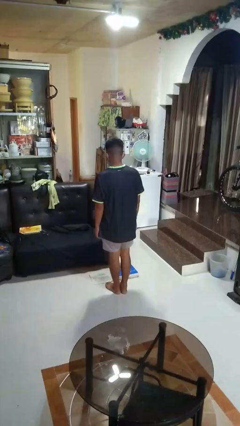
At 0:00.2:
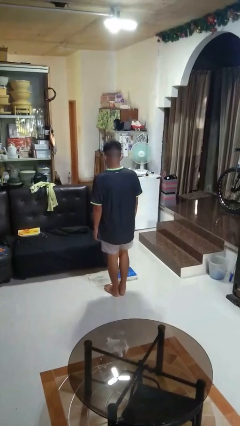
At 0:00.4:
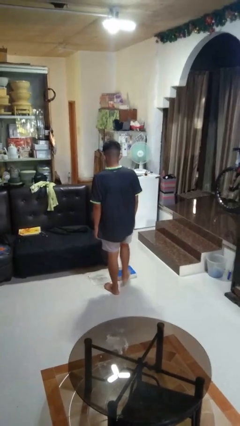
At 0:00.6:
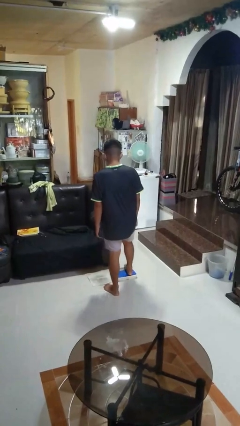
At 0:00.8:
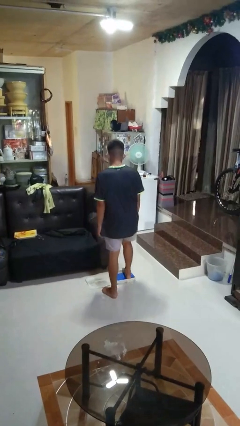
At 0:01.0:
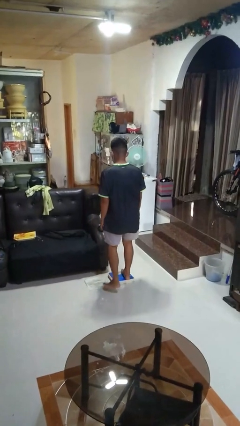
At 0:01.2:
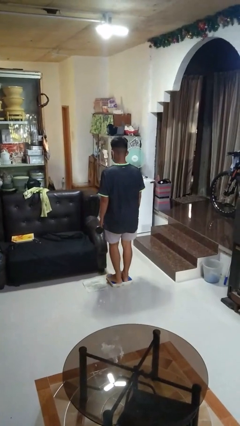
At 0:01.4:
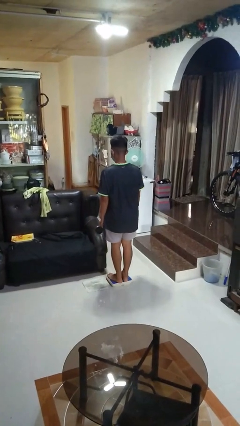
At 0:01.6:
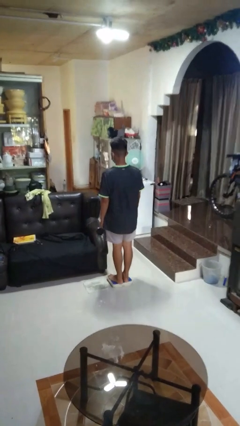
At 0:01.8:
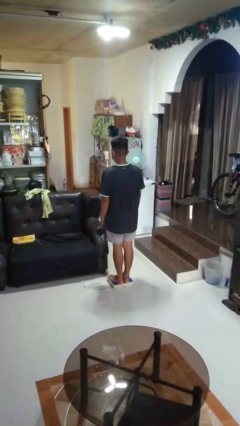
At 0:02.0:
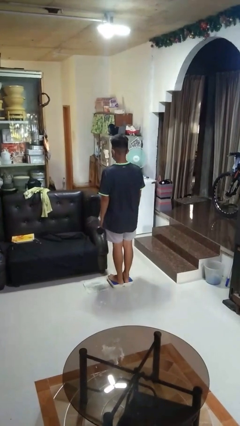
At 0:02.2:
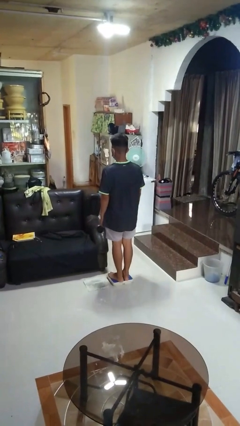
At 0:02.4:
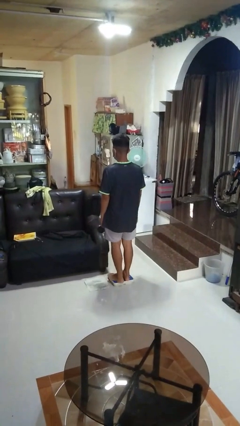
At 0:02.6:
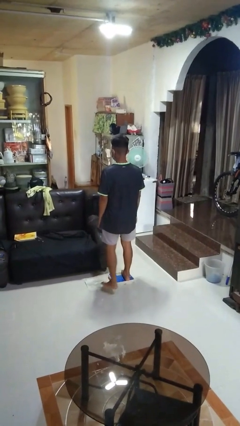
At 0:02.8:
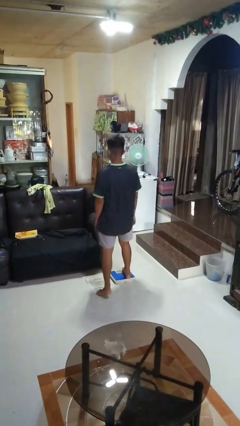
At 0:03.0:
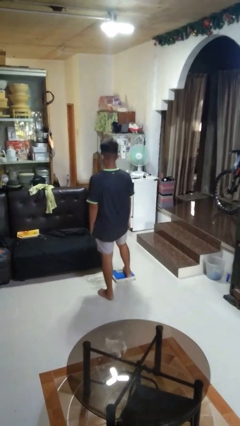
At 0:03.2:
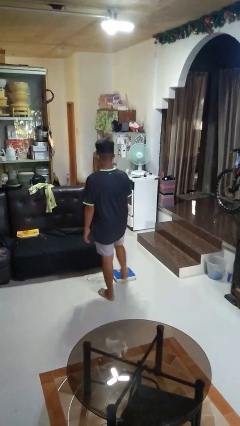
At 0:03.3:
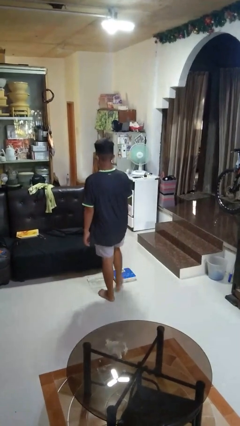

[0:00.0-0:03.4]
person uses bodyweight scale

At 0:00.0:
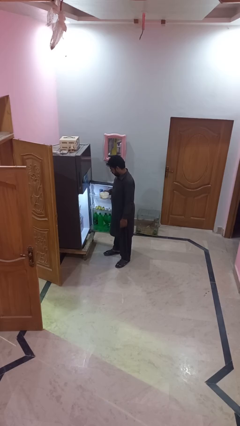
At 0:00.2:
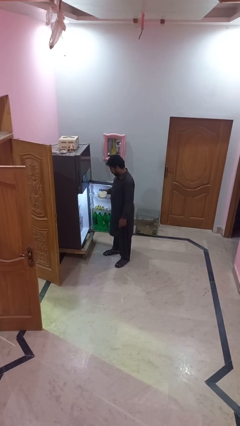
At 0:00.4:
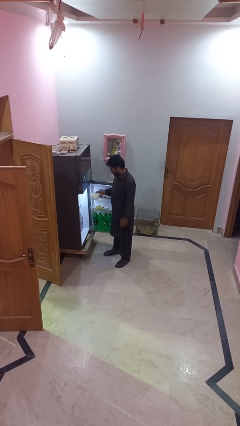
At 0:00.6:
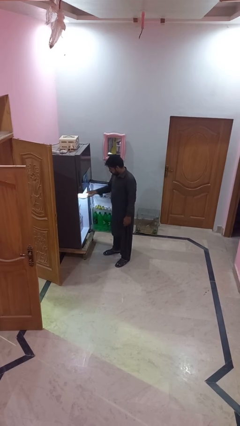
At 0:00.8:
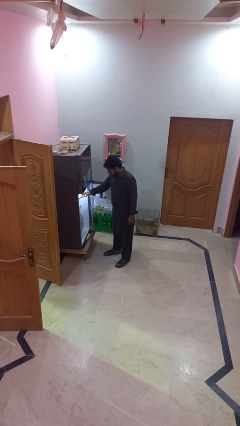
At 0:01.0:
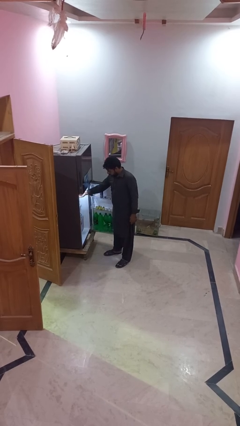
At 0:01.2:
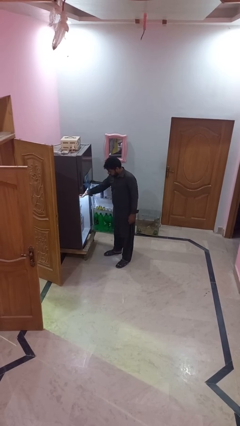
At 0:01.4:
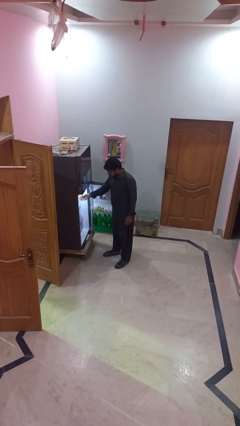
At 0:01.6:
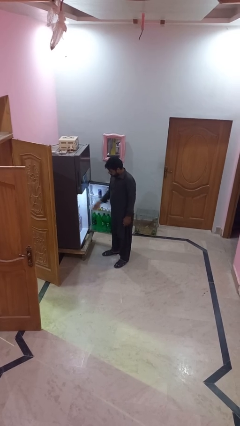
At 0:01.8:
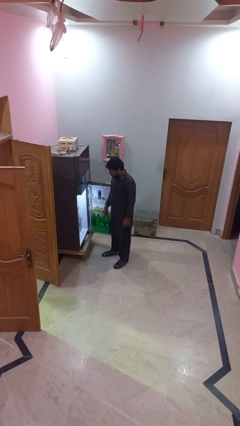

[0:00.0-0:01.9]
person puts object into refrigerator

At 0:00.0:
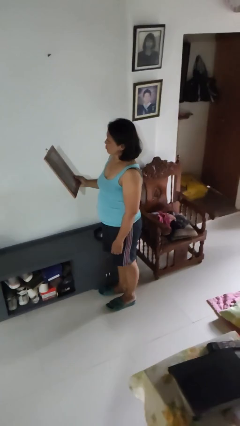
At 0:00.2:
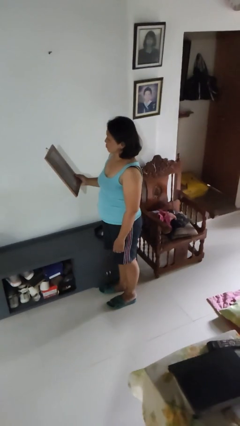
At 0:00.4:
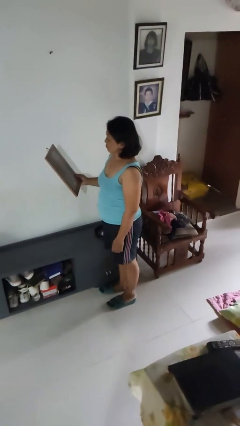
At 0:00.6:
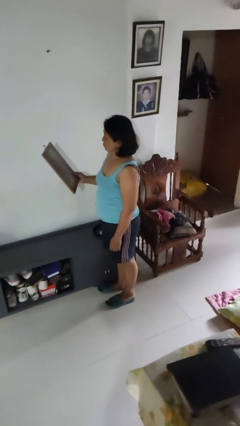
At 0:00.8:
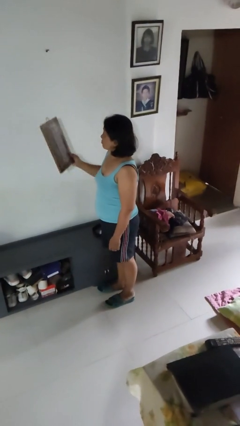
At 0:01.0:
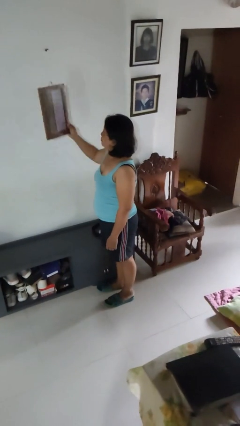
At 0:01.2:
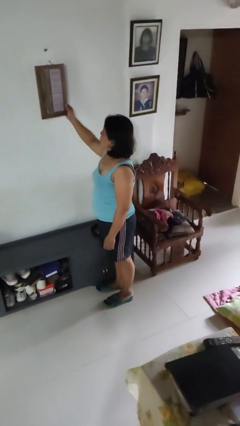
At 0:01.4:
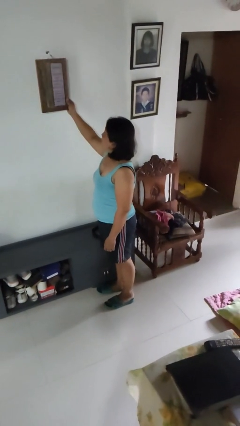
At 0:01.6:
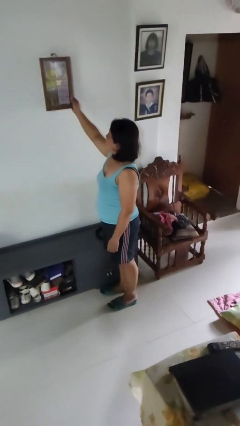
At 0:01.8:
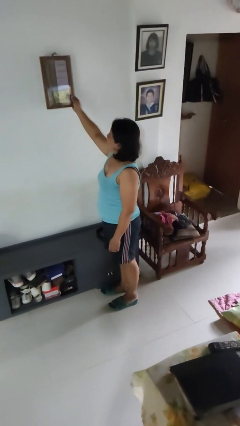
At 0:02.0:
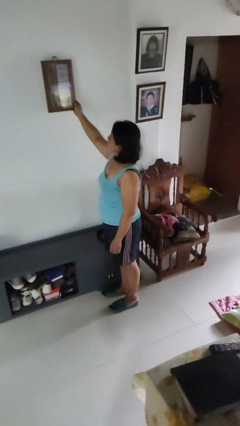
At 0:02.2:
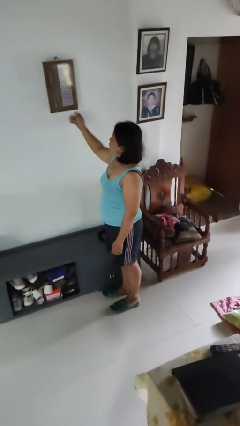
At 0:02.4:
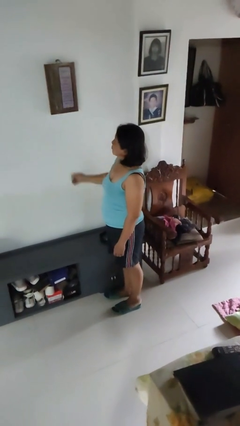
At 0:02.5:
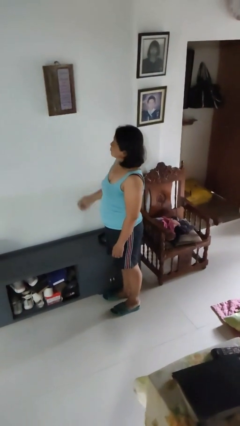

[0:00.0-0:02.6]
person puts up picture frame

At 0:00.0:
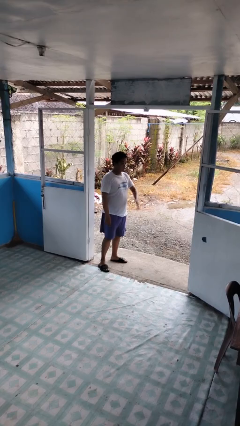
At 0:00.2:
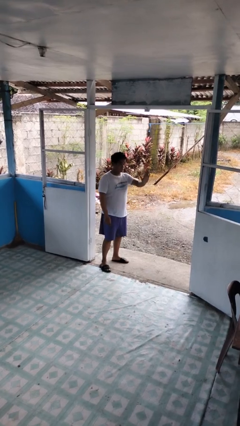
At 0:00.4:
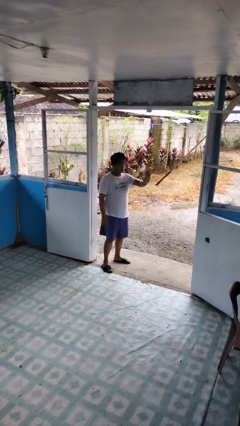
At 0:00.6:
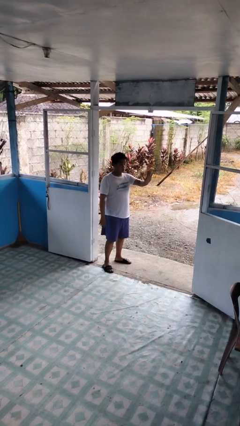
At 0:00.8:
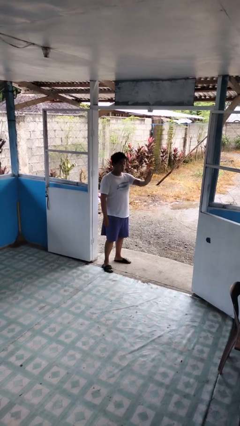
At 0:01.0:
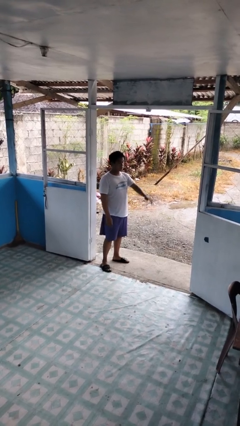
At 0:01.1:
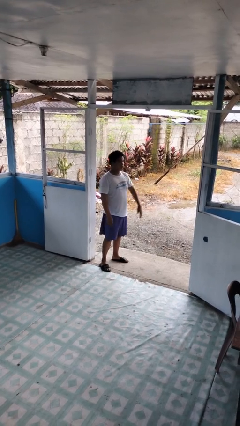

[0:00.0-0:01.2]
person gestures stop

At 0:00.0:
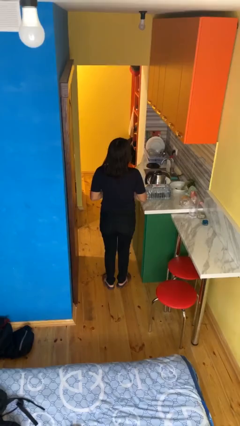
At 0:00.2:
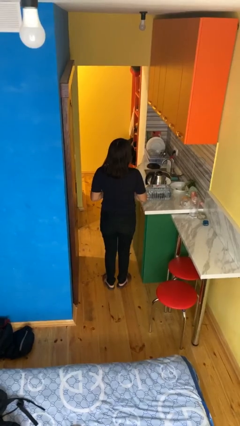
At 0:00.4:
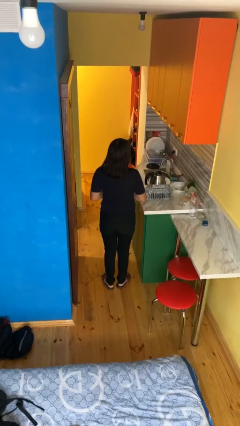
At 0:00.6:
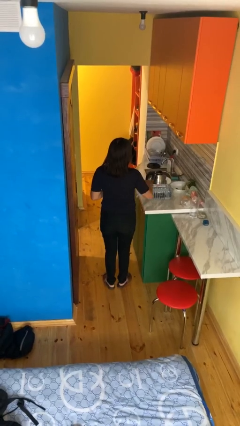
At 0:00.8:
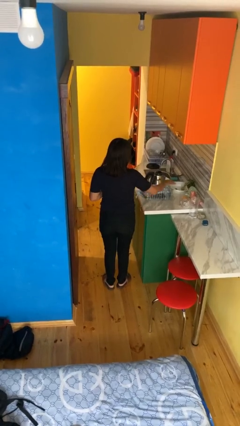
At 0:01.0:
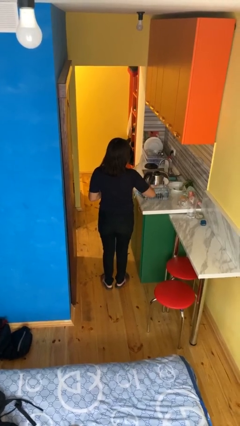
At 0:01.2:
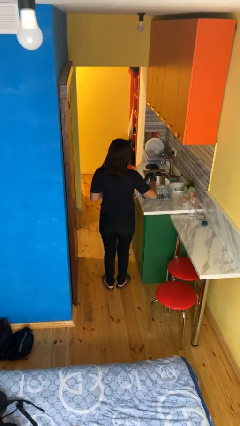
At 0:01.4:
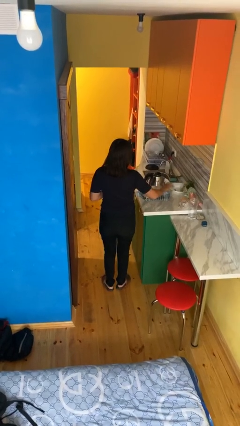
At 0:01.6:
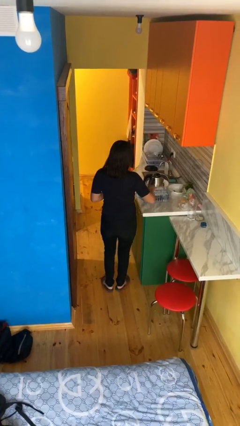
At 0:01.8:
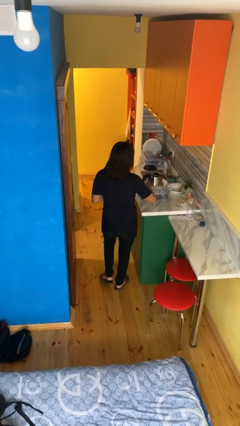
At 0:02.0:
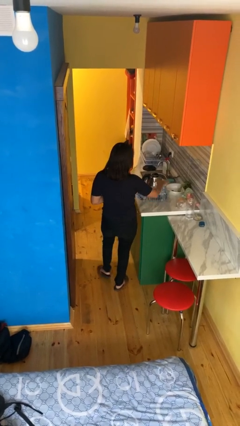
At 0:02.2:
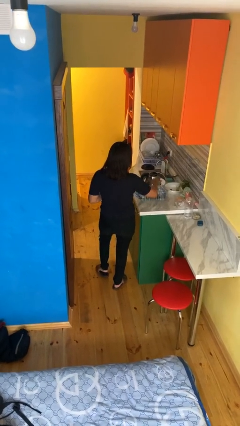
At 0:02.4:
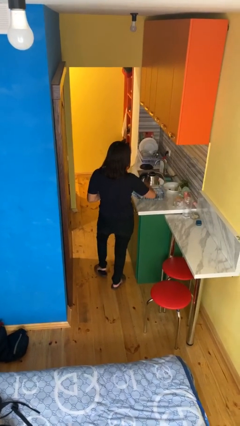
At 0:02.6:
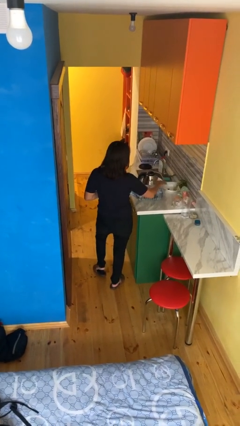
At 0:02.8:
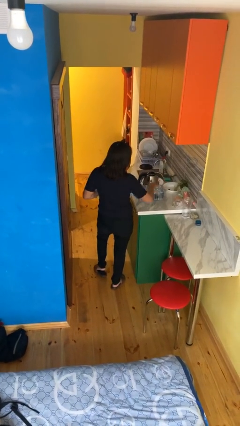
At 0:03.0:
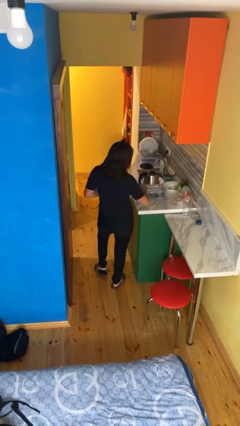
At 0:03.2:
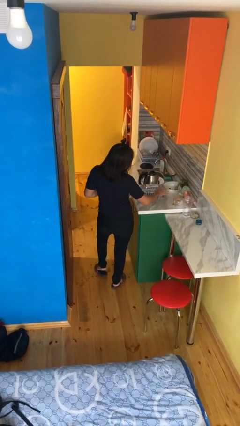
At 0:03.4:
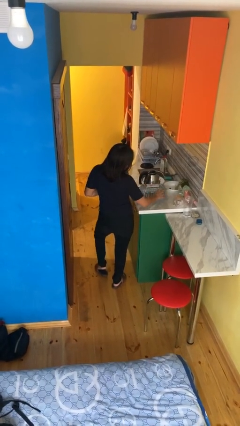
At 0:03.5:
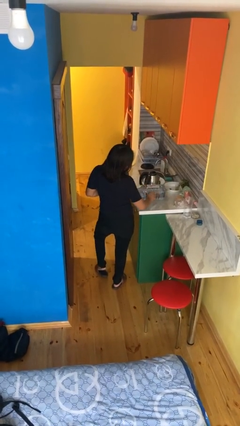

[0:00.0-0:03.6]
person waves hand over object

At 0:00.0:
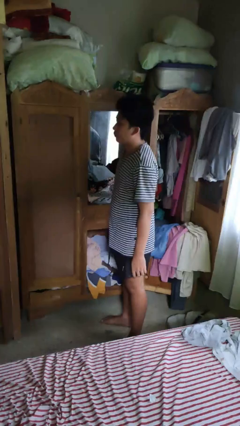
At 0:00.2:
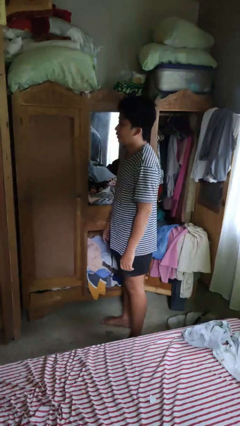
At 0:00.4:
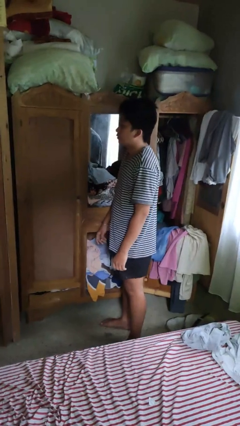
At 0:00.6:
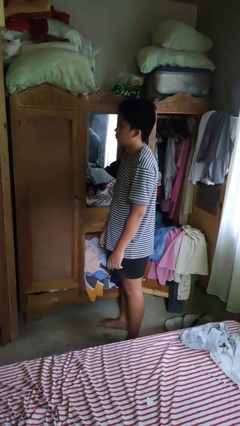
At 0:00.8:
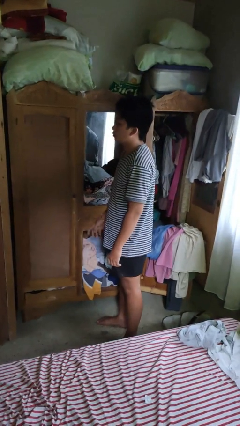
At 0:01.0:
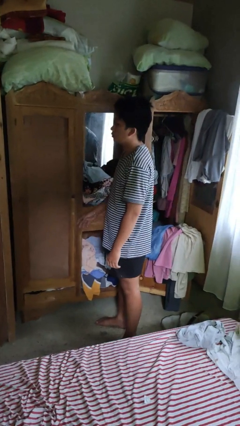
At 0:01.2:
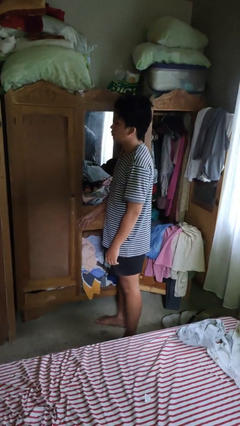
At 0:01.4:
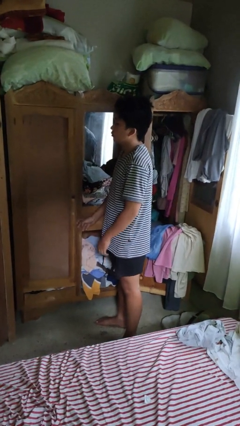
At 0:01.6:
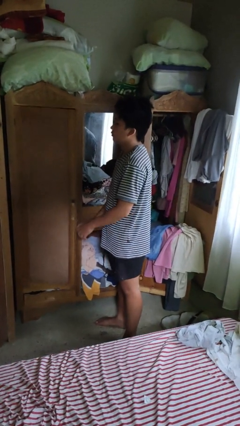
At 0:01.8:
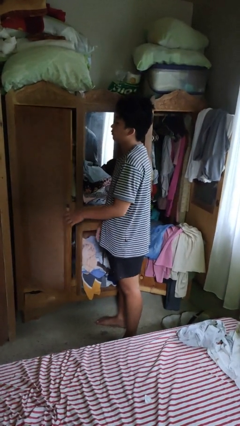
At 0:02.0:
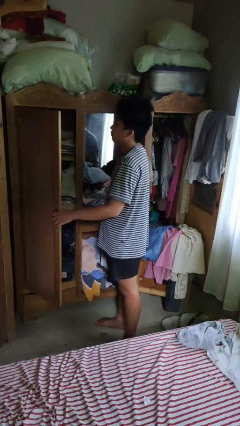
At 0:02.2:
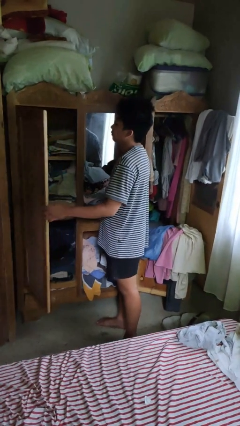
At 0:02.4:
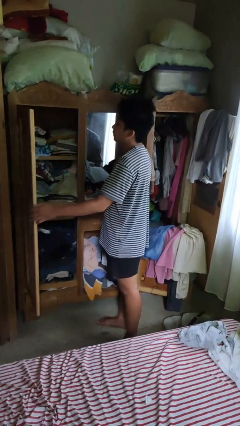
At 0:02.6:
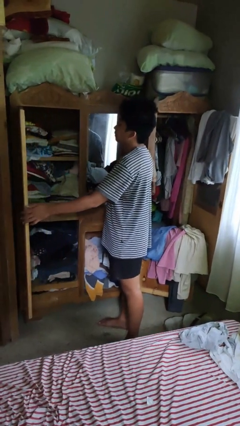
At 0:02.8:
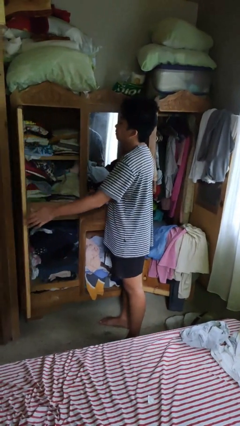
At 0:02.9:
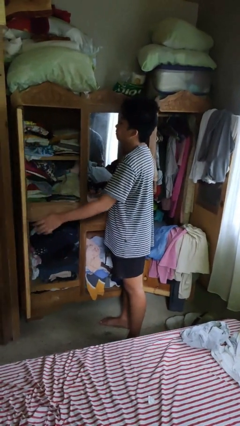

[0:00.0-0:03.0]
person opens dresser drawer

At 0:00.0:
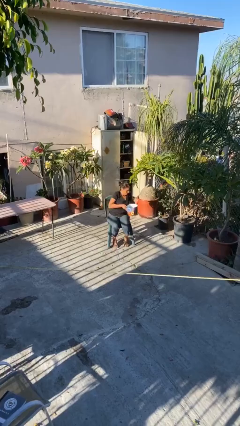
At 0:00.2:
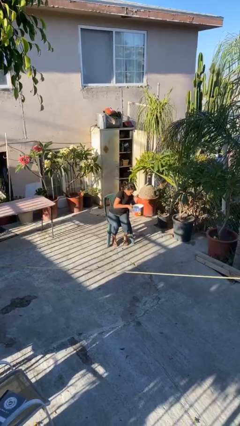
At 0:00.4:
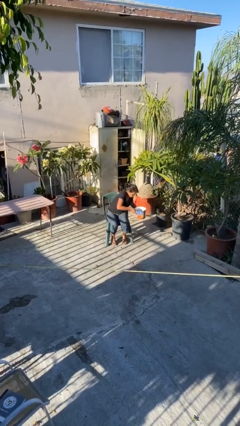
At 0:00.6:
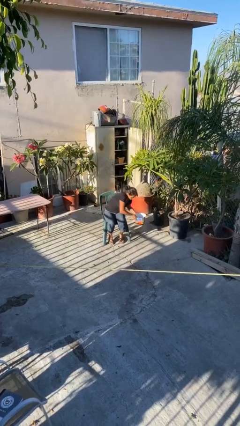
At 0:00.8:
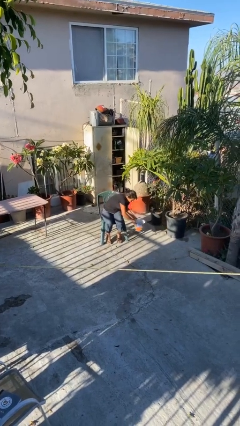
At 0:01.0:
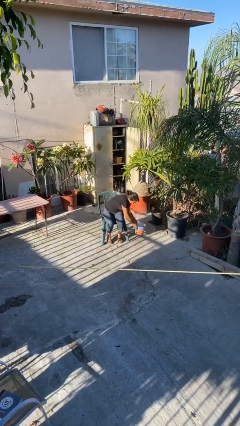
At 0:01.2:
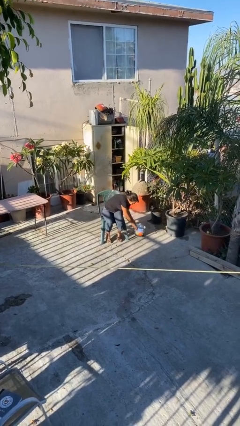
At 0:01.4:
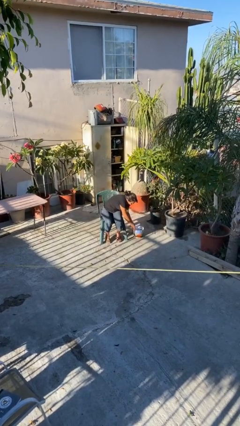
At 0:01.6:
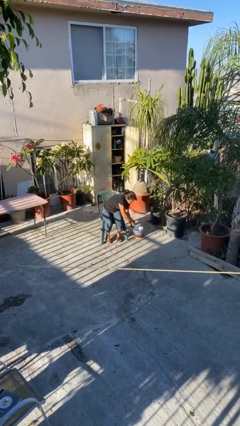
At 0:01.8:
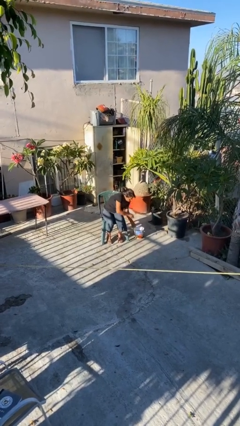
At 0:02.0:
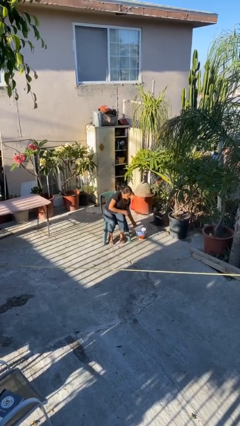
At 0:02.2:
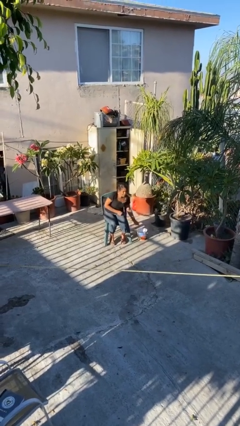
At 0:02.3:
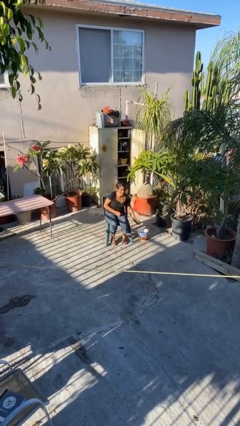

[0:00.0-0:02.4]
person puts down object on floor
